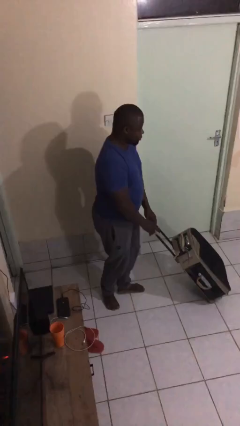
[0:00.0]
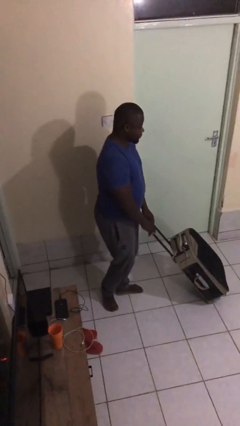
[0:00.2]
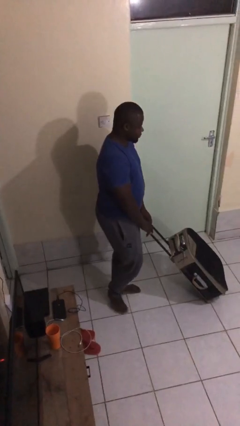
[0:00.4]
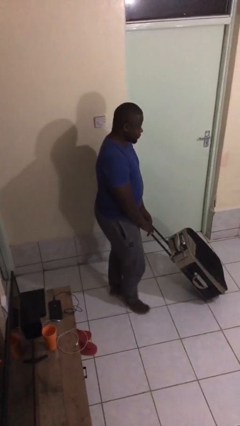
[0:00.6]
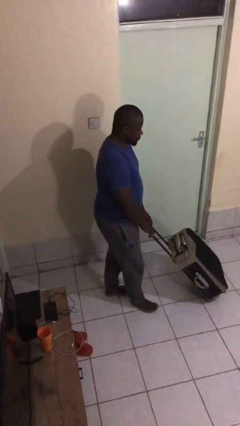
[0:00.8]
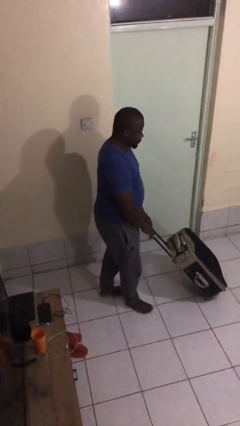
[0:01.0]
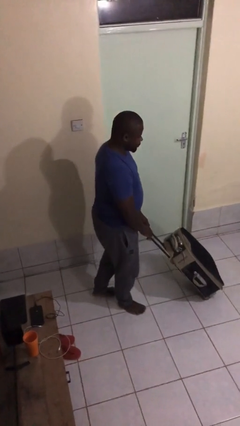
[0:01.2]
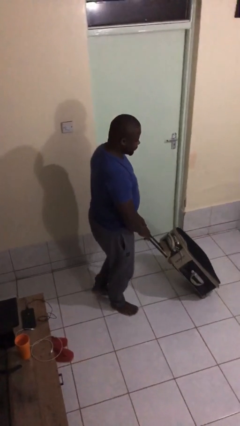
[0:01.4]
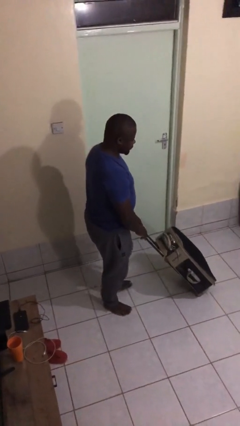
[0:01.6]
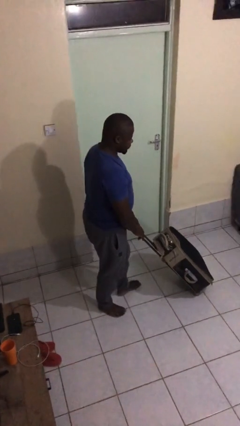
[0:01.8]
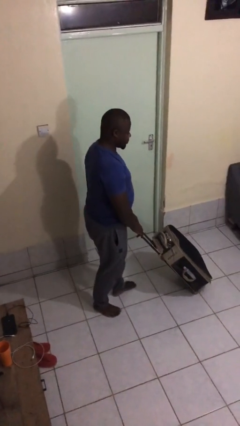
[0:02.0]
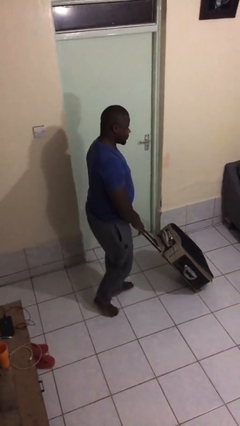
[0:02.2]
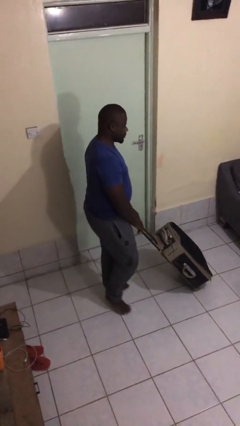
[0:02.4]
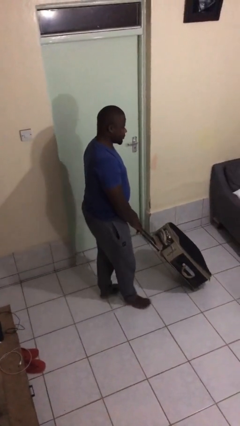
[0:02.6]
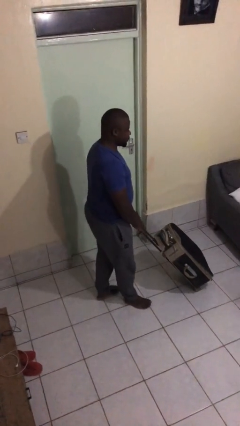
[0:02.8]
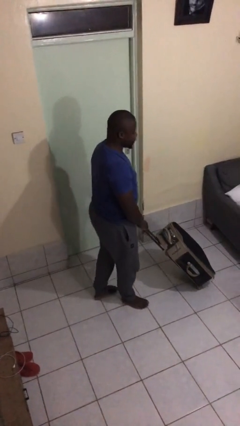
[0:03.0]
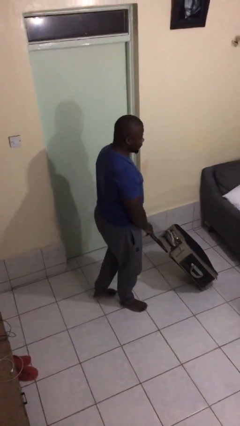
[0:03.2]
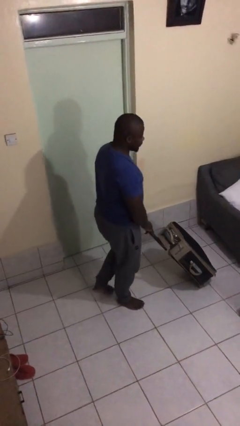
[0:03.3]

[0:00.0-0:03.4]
person pushes wheeled cart

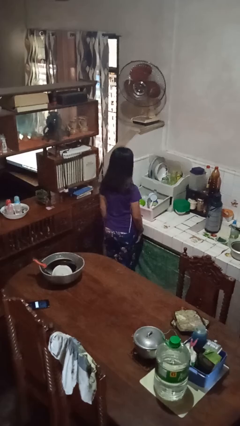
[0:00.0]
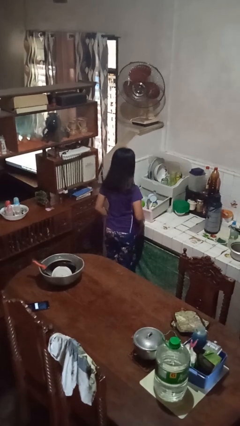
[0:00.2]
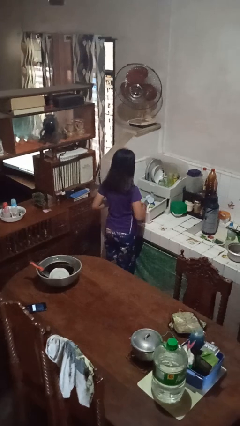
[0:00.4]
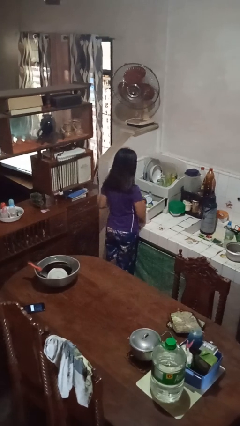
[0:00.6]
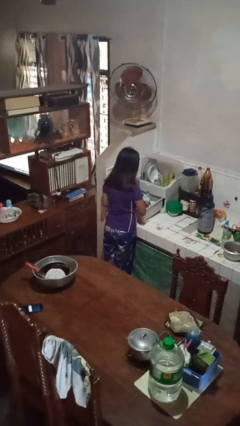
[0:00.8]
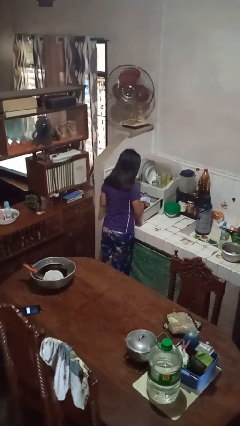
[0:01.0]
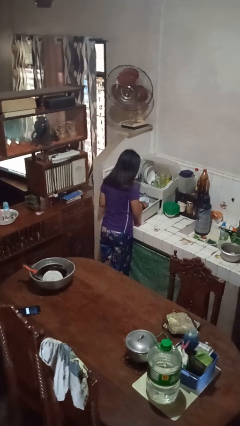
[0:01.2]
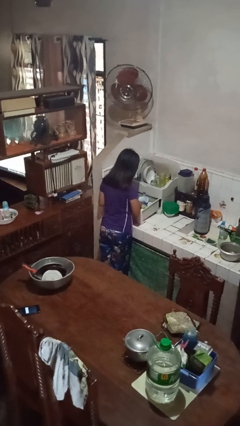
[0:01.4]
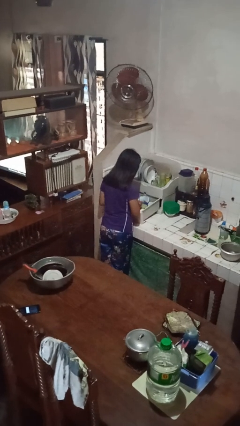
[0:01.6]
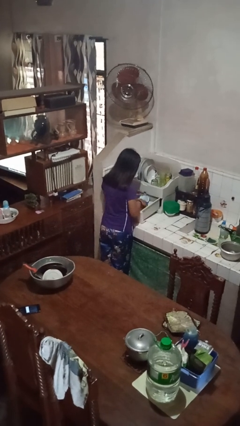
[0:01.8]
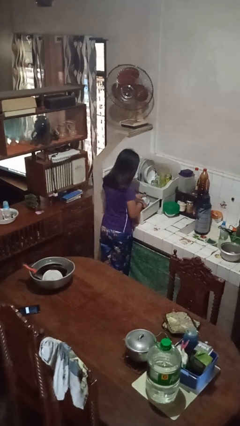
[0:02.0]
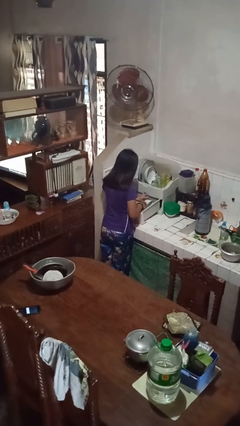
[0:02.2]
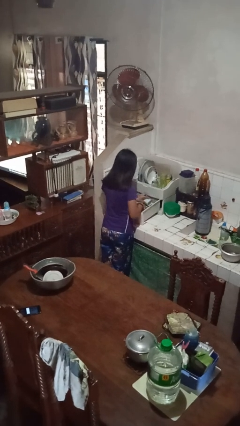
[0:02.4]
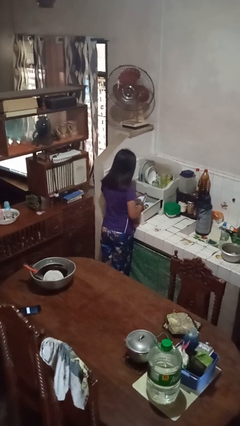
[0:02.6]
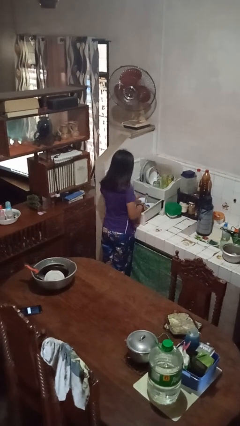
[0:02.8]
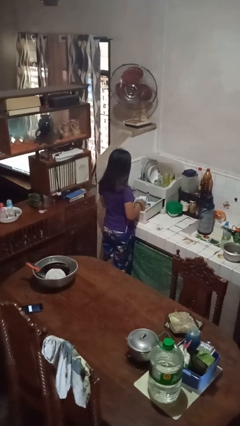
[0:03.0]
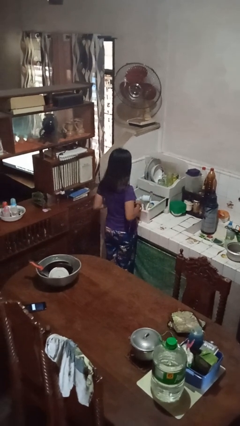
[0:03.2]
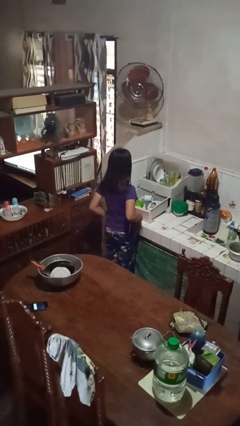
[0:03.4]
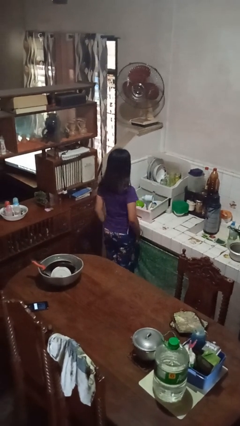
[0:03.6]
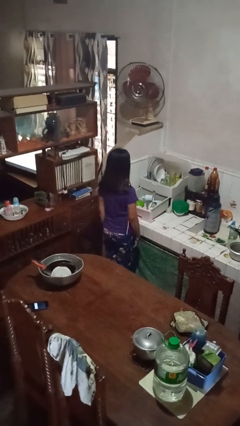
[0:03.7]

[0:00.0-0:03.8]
person searches in kitchen drawer

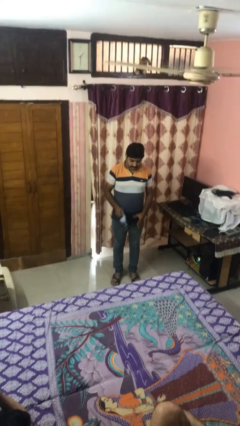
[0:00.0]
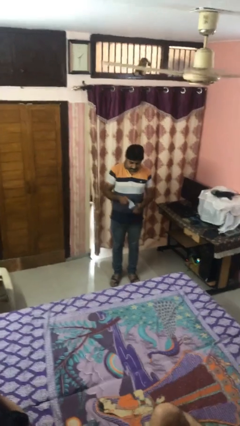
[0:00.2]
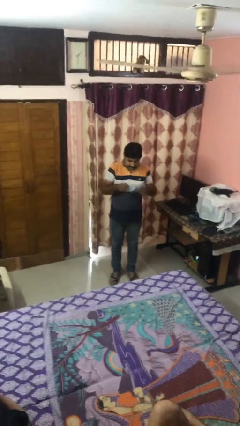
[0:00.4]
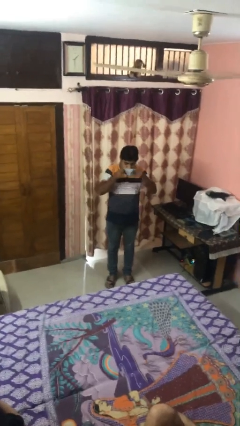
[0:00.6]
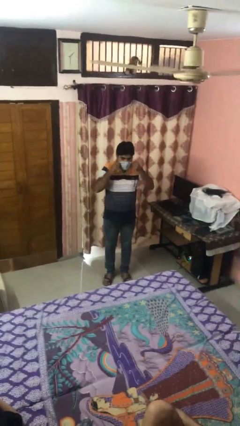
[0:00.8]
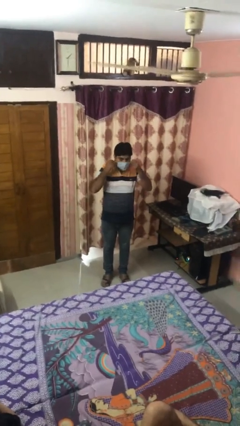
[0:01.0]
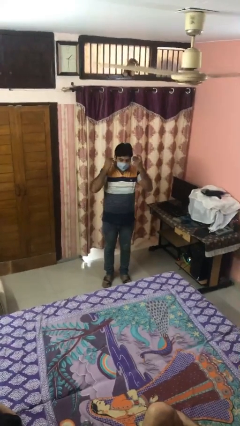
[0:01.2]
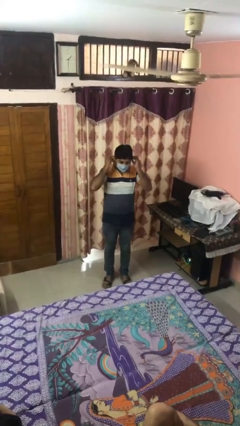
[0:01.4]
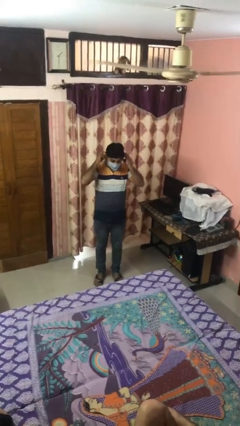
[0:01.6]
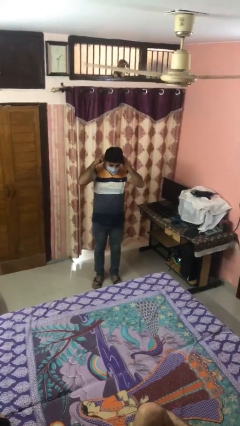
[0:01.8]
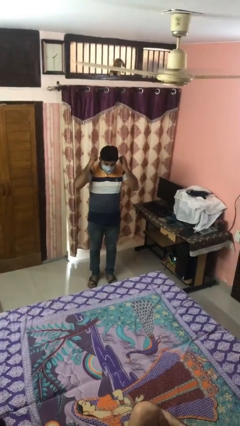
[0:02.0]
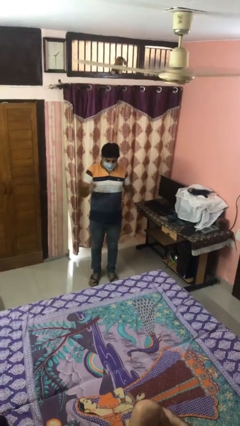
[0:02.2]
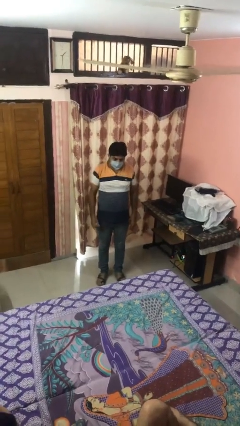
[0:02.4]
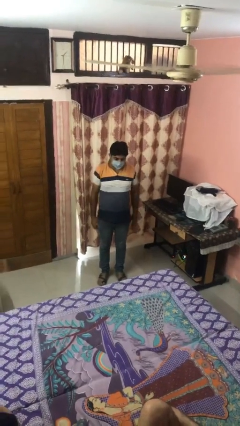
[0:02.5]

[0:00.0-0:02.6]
person puts on facemask

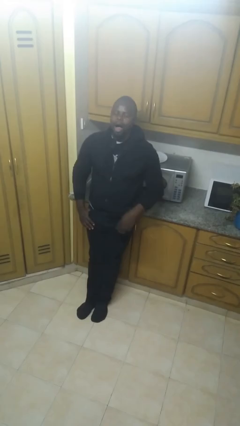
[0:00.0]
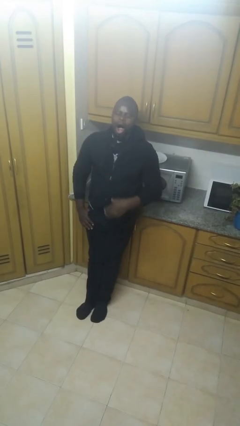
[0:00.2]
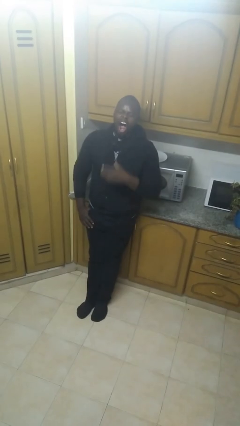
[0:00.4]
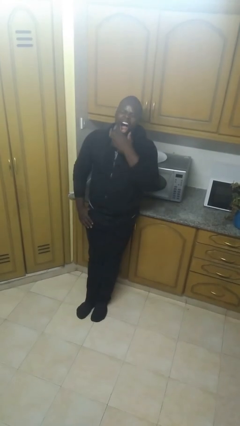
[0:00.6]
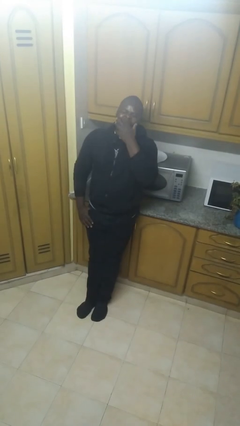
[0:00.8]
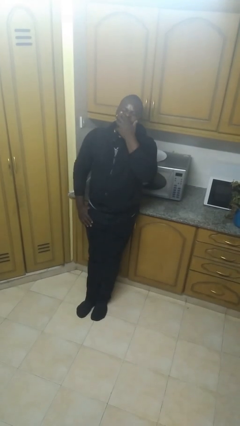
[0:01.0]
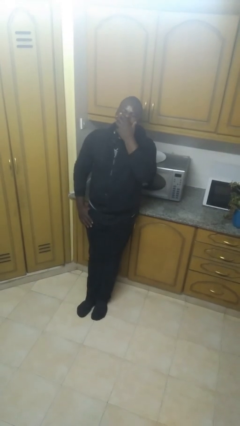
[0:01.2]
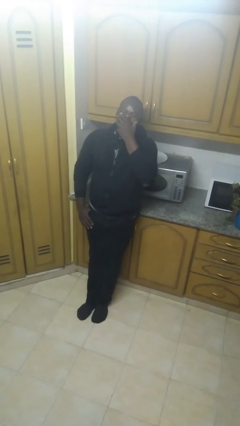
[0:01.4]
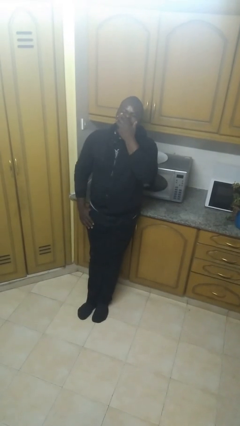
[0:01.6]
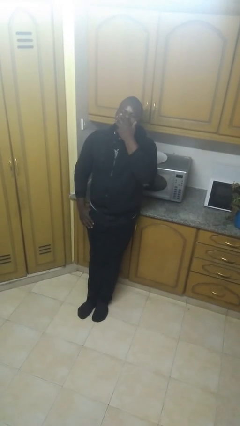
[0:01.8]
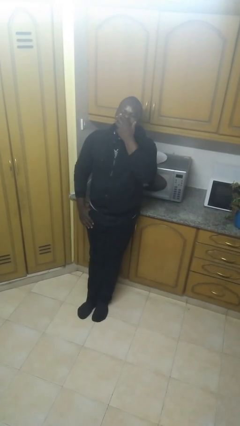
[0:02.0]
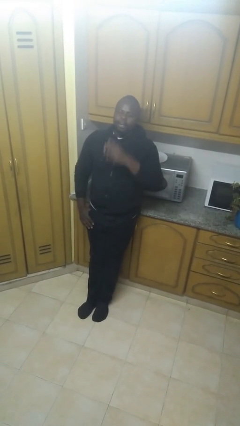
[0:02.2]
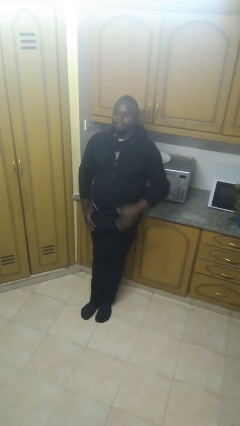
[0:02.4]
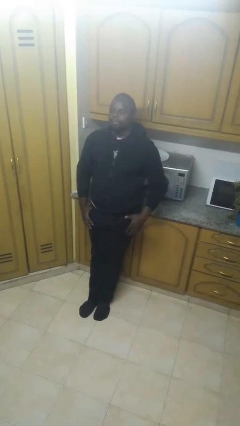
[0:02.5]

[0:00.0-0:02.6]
person yawns

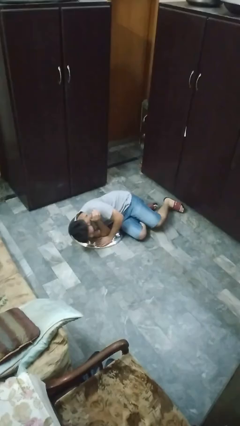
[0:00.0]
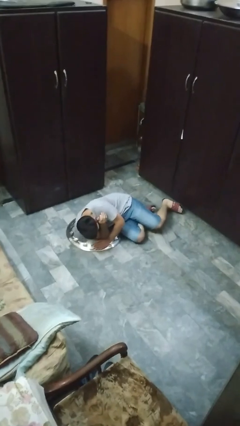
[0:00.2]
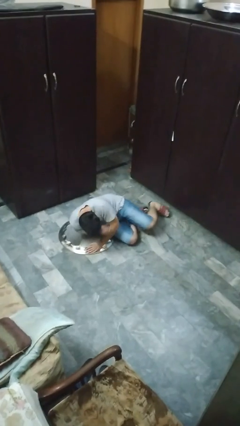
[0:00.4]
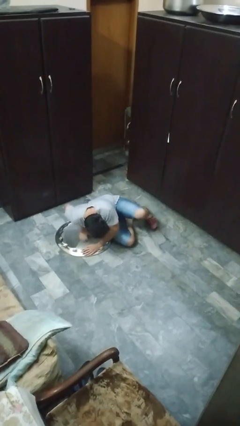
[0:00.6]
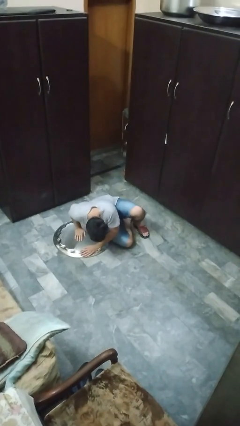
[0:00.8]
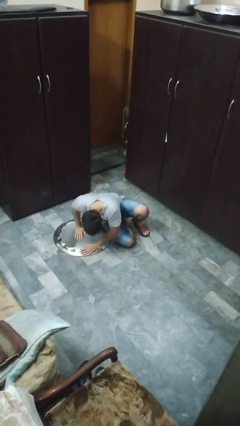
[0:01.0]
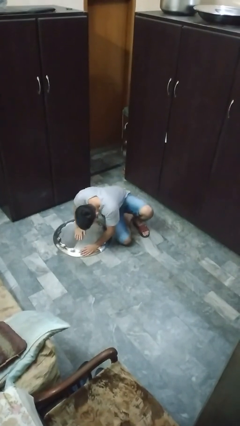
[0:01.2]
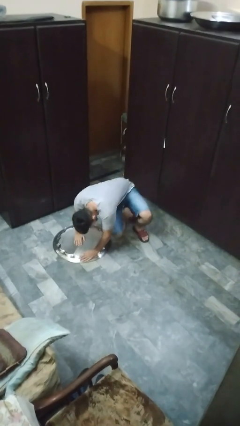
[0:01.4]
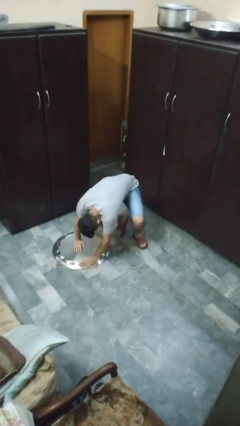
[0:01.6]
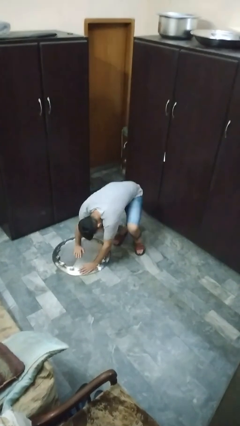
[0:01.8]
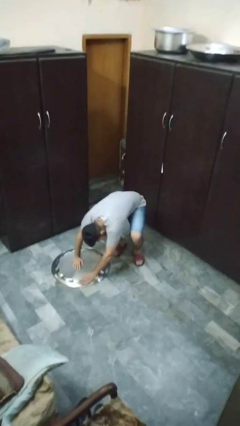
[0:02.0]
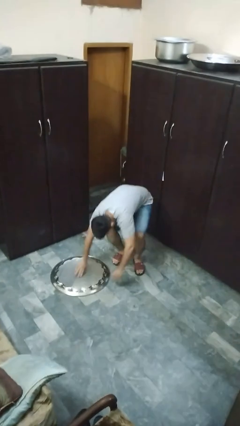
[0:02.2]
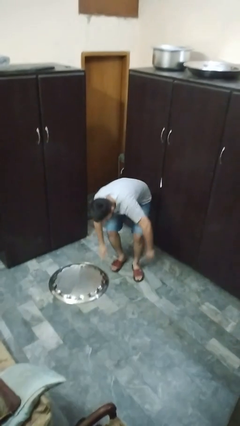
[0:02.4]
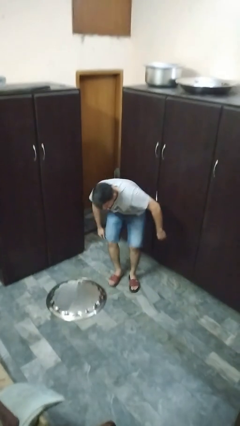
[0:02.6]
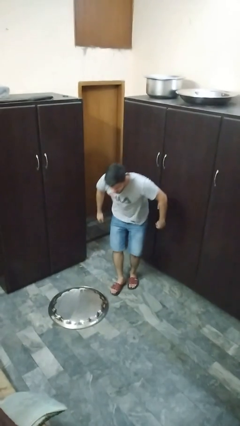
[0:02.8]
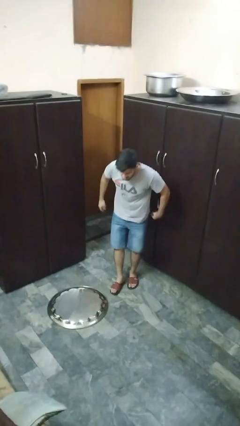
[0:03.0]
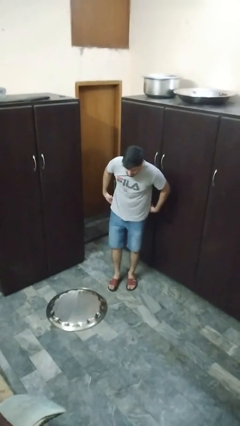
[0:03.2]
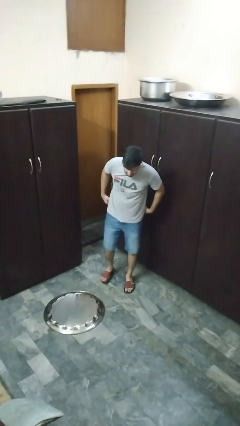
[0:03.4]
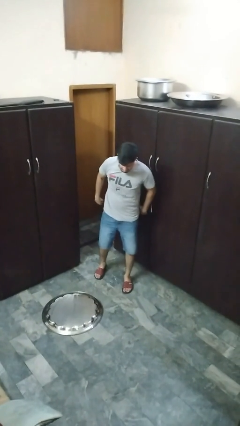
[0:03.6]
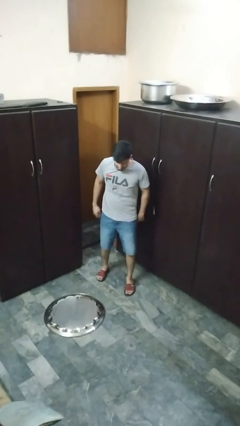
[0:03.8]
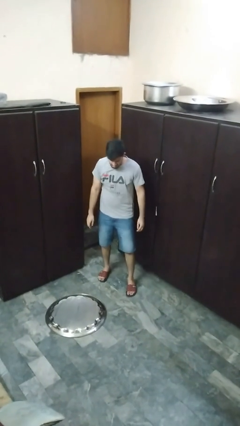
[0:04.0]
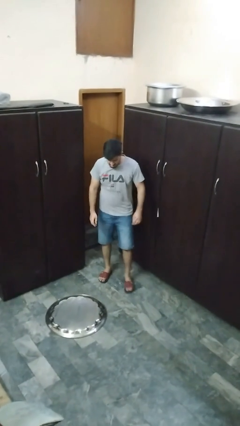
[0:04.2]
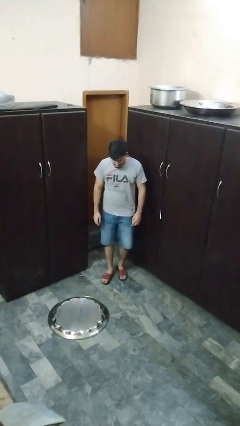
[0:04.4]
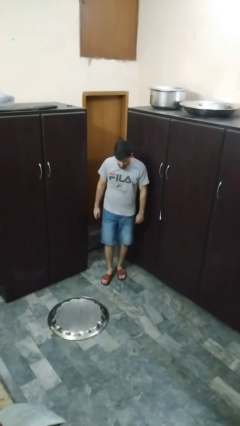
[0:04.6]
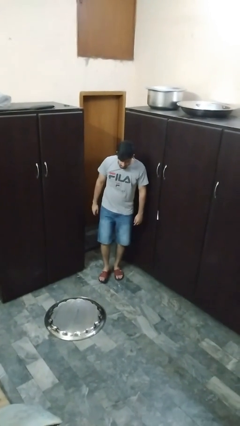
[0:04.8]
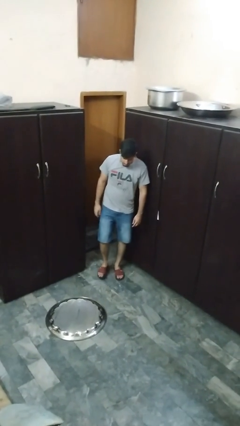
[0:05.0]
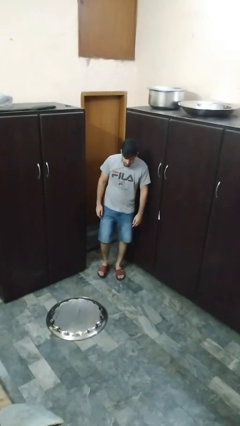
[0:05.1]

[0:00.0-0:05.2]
person stands up from floor
